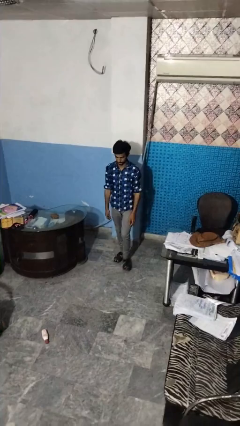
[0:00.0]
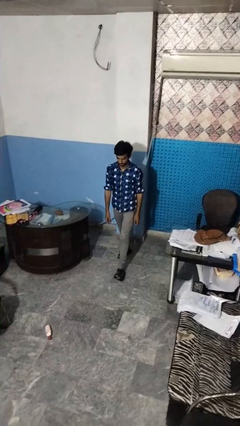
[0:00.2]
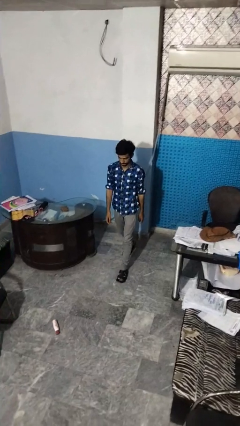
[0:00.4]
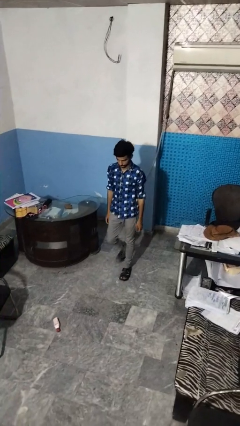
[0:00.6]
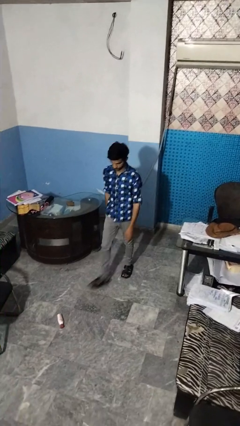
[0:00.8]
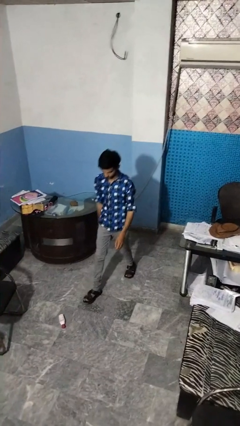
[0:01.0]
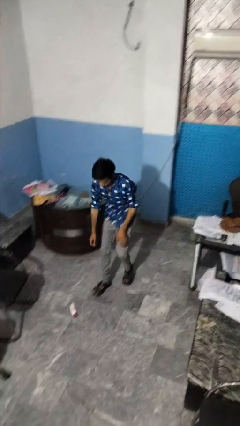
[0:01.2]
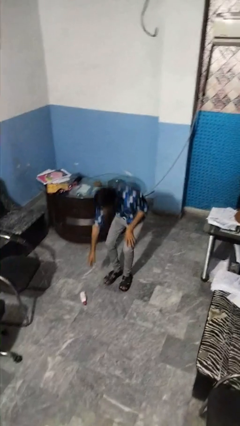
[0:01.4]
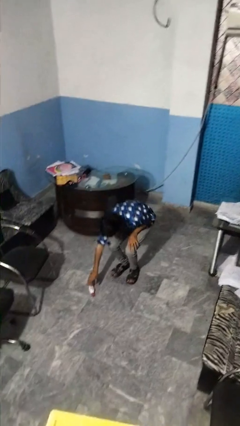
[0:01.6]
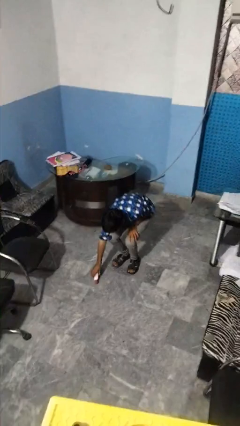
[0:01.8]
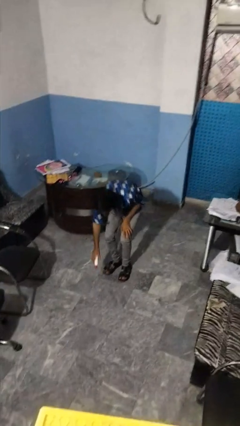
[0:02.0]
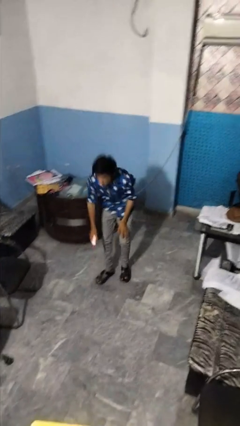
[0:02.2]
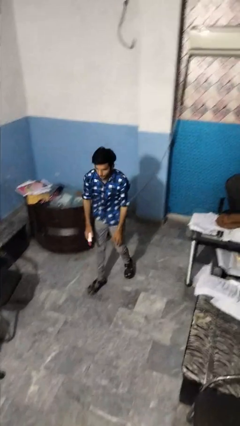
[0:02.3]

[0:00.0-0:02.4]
person picks up object from floor

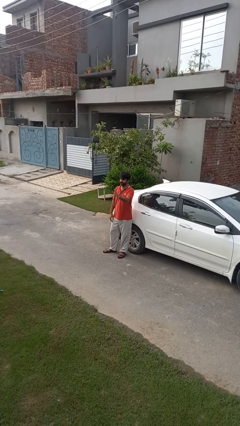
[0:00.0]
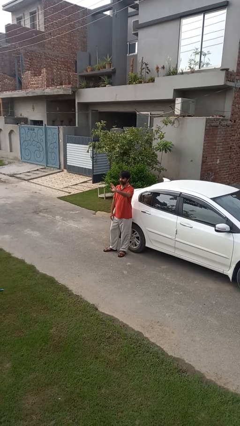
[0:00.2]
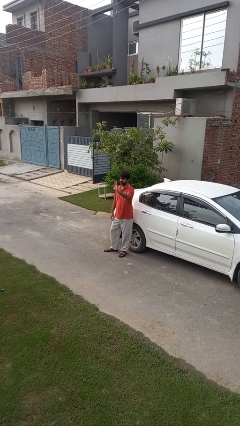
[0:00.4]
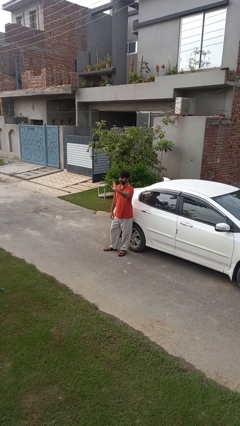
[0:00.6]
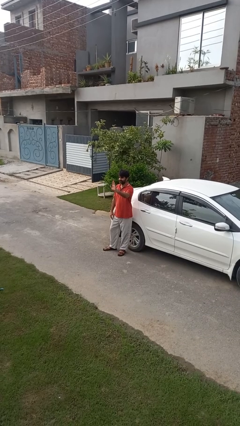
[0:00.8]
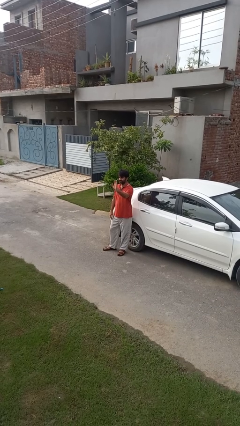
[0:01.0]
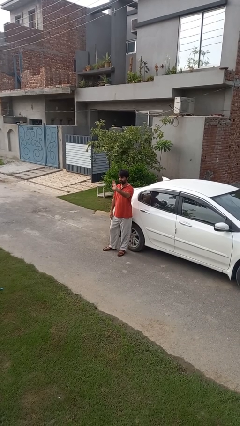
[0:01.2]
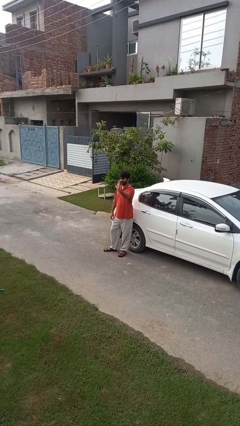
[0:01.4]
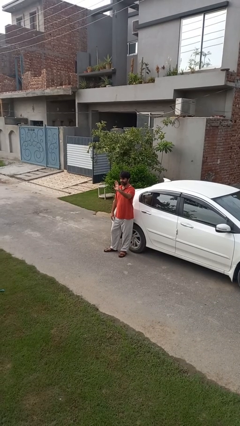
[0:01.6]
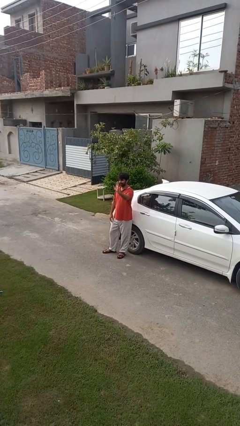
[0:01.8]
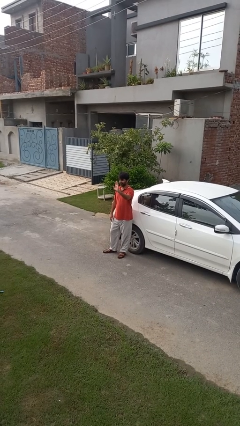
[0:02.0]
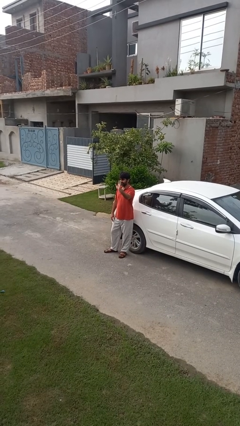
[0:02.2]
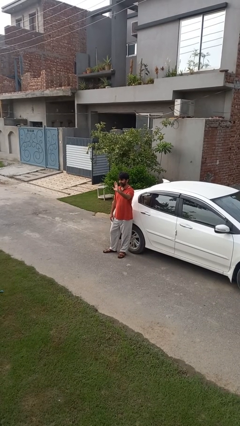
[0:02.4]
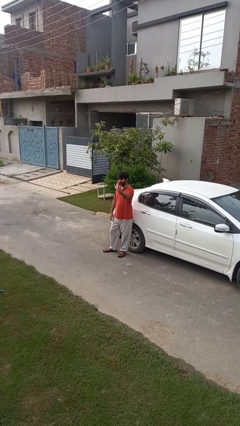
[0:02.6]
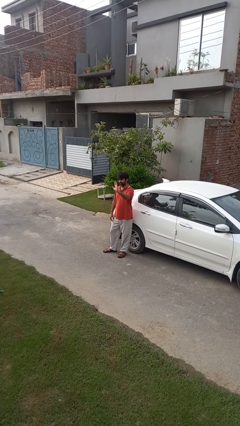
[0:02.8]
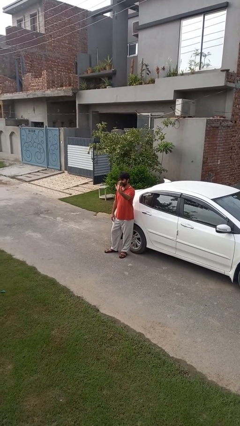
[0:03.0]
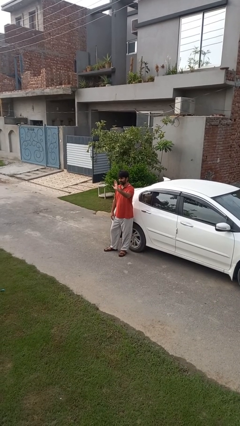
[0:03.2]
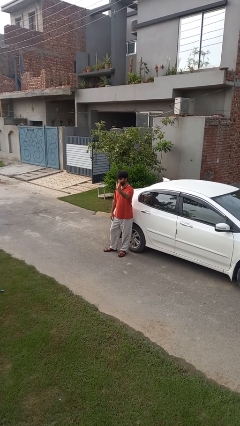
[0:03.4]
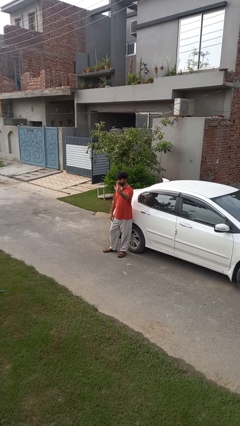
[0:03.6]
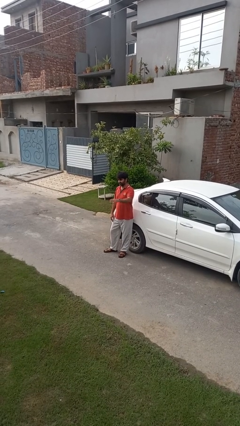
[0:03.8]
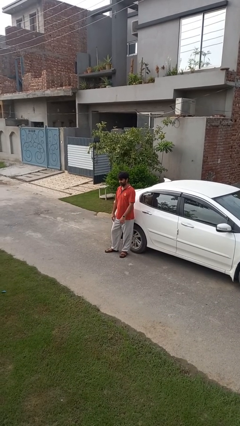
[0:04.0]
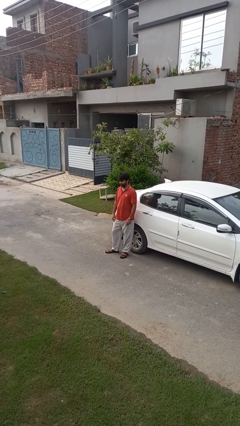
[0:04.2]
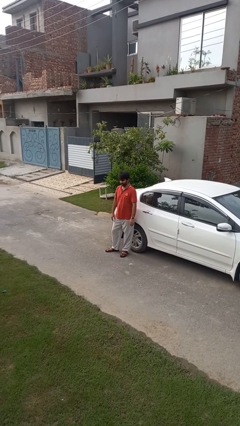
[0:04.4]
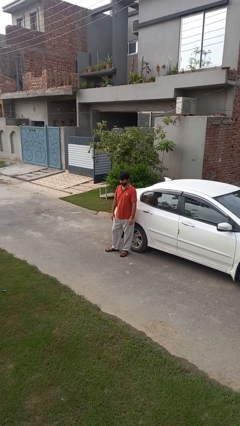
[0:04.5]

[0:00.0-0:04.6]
person waves at person

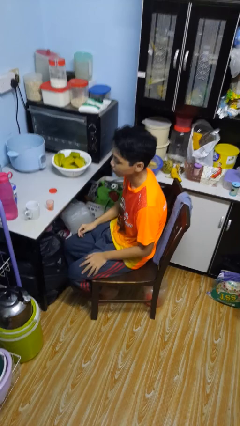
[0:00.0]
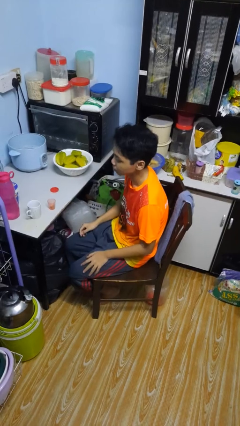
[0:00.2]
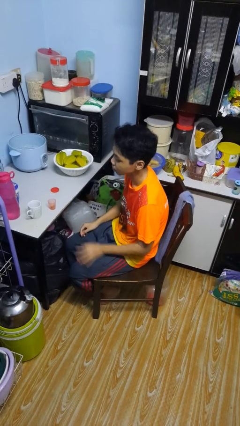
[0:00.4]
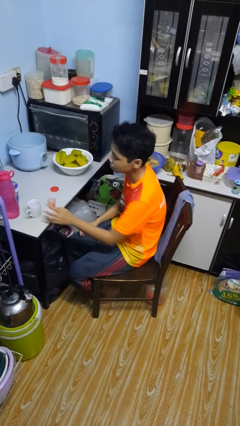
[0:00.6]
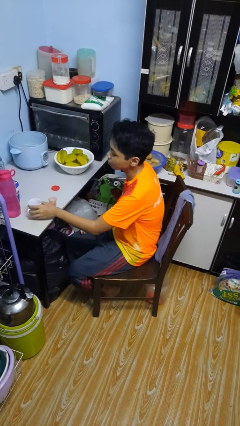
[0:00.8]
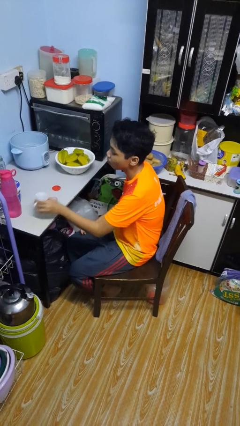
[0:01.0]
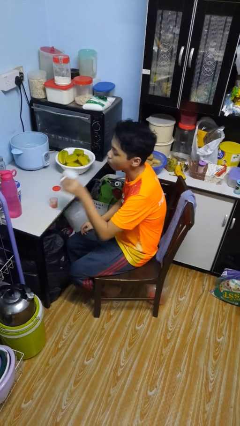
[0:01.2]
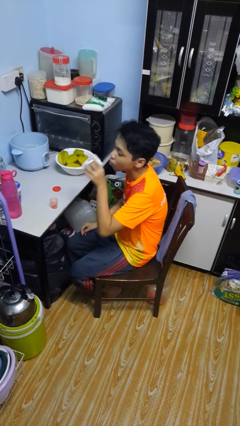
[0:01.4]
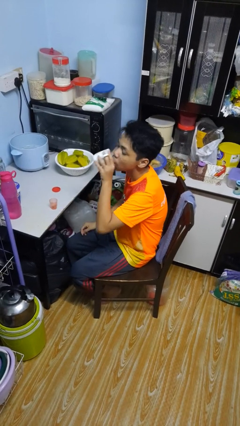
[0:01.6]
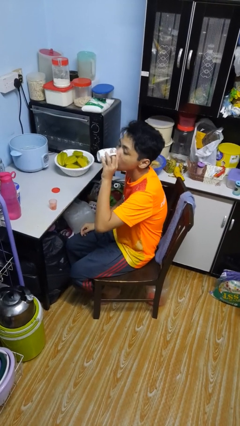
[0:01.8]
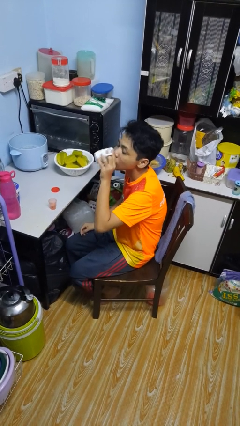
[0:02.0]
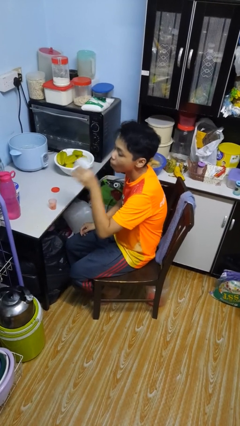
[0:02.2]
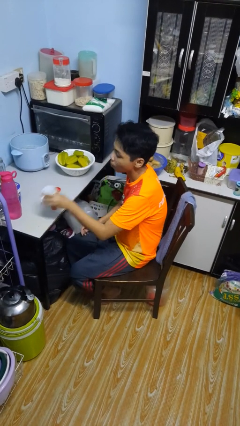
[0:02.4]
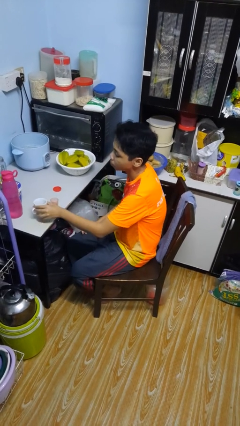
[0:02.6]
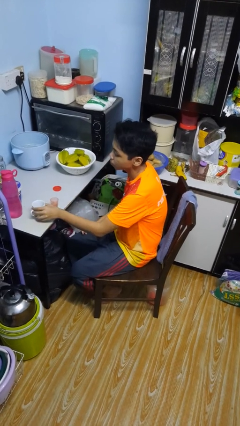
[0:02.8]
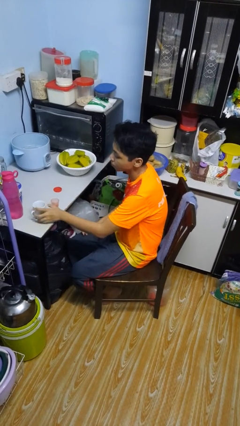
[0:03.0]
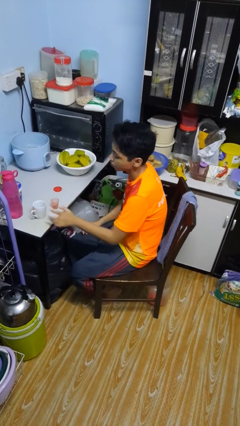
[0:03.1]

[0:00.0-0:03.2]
person drinks from cup

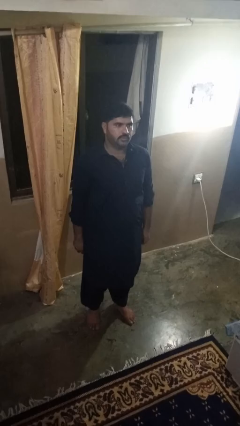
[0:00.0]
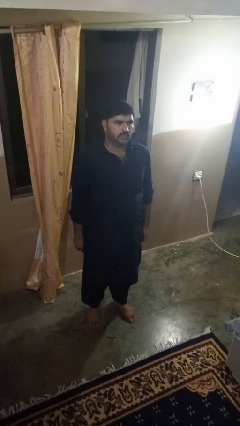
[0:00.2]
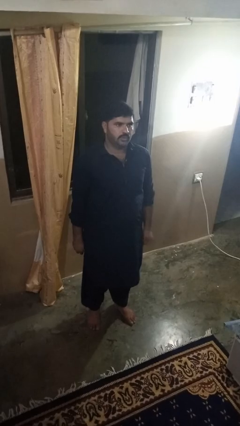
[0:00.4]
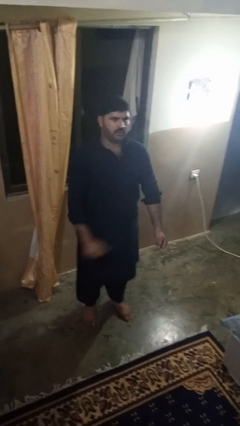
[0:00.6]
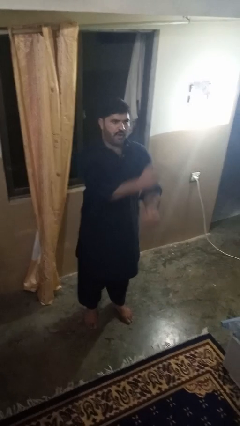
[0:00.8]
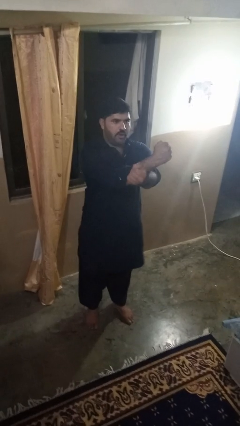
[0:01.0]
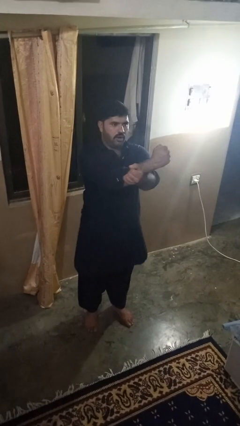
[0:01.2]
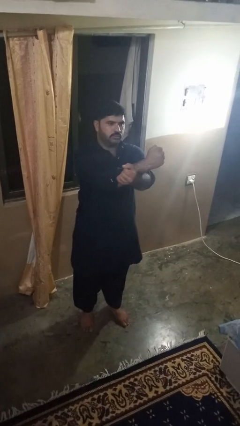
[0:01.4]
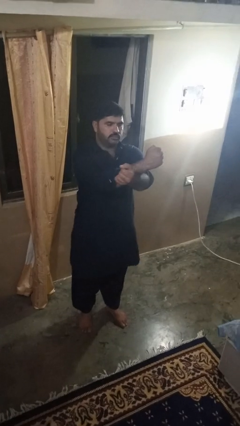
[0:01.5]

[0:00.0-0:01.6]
person crosses arms

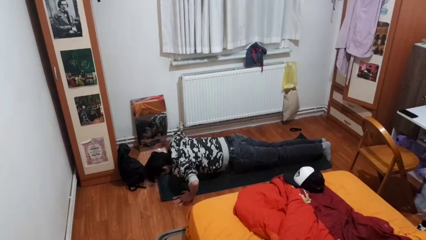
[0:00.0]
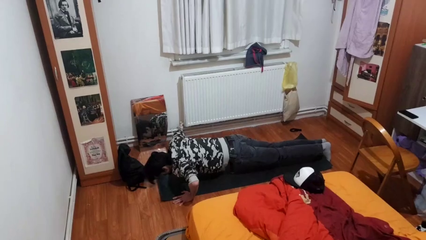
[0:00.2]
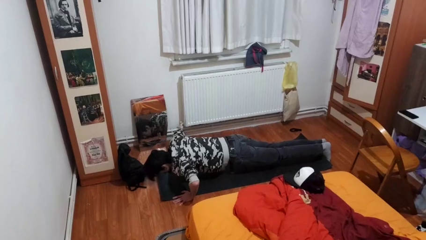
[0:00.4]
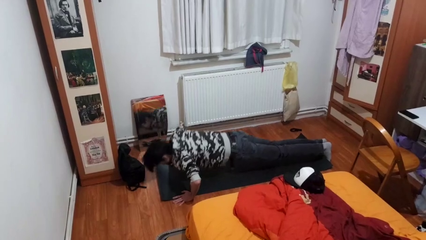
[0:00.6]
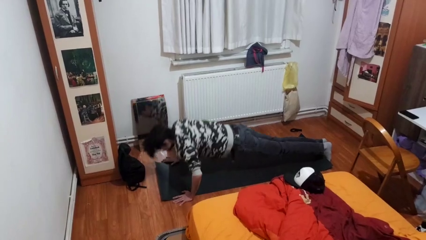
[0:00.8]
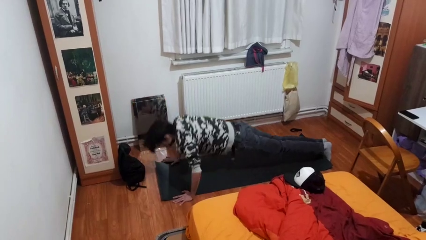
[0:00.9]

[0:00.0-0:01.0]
person exercises with pushup

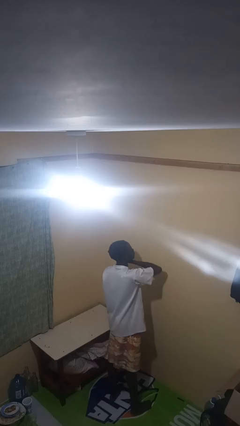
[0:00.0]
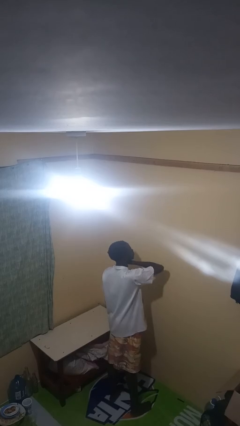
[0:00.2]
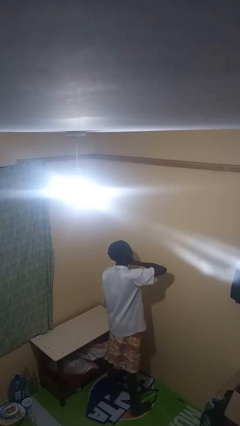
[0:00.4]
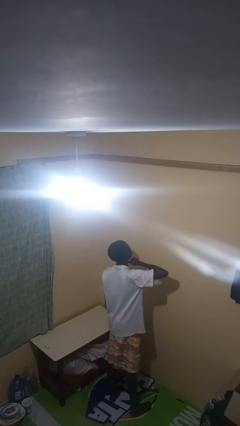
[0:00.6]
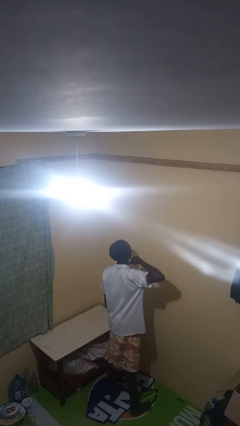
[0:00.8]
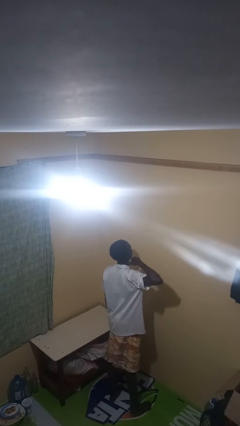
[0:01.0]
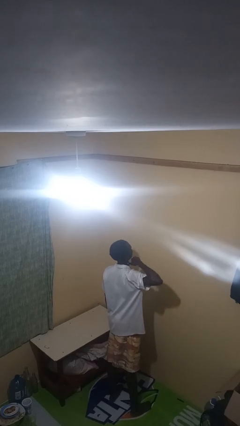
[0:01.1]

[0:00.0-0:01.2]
person gestures cut

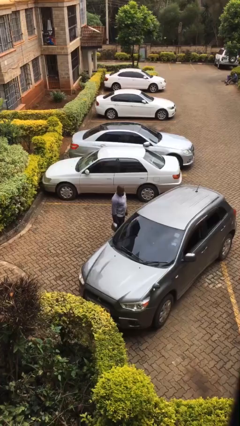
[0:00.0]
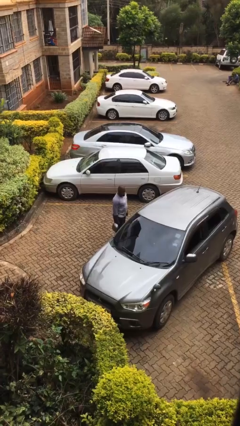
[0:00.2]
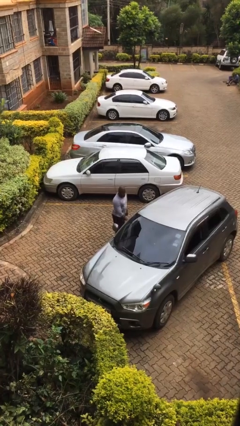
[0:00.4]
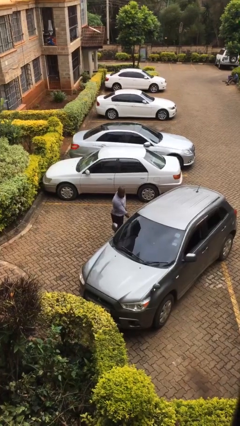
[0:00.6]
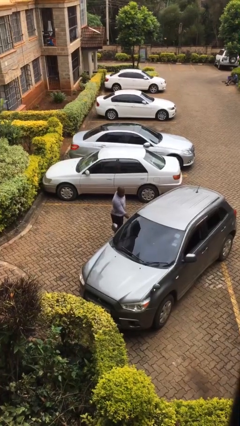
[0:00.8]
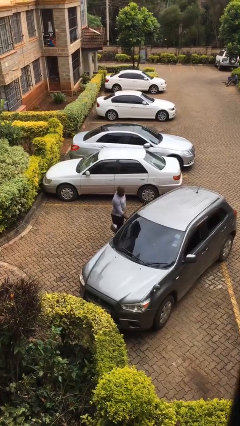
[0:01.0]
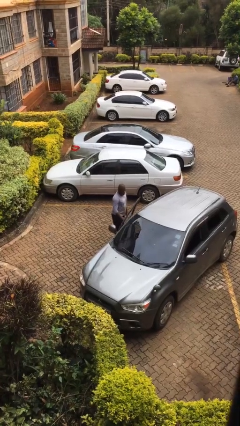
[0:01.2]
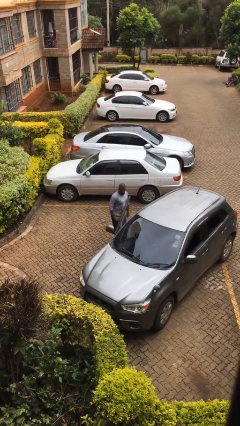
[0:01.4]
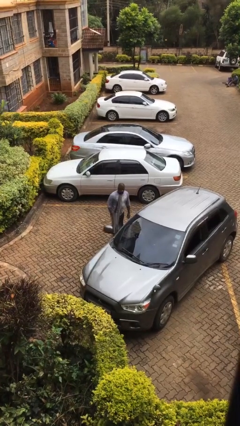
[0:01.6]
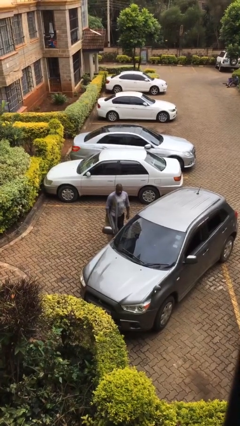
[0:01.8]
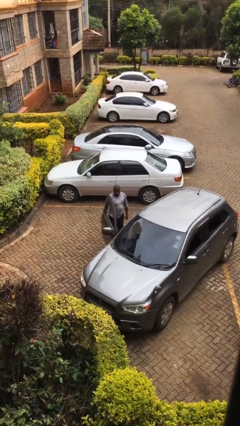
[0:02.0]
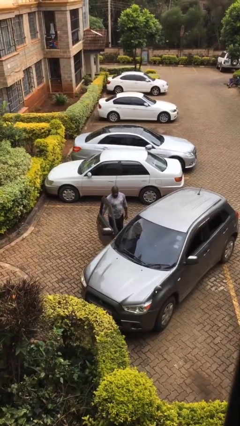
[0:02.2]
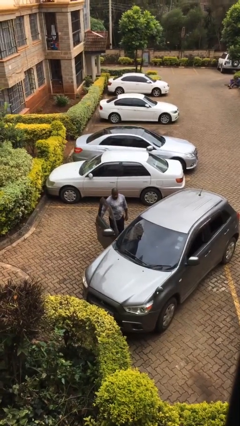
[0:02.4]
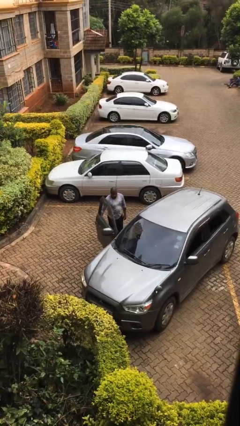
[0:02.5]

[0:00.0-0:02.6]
person opens car door

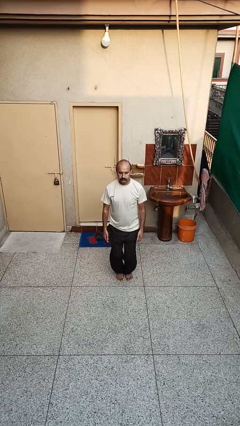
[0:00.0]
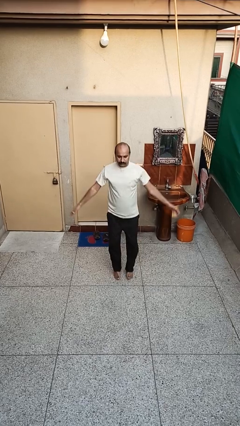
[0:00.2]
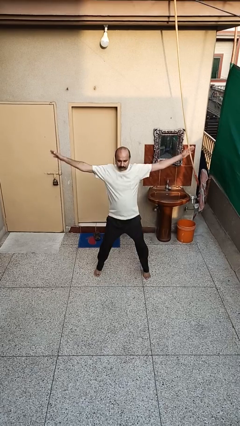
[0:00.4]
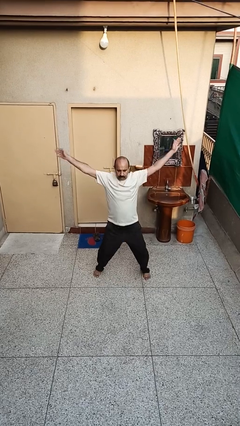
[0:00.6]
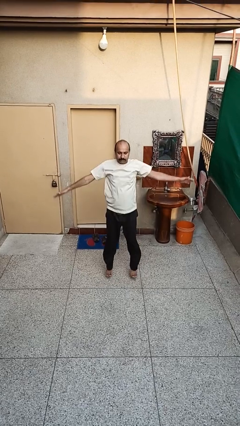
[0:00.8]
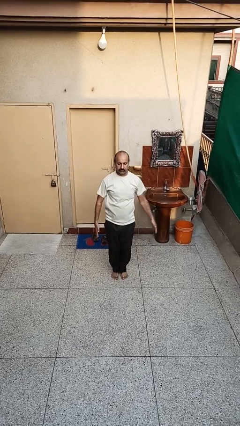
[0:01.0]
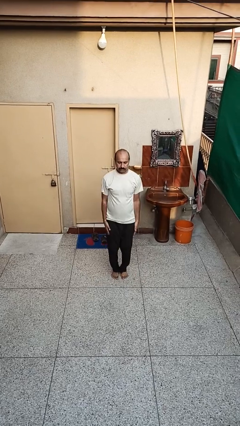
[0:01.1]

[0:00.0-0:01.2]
person exercises with jumping jacks
